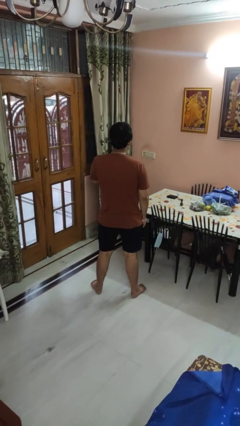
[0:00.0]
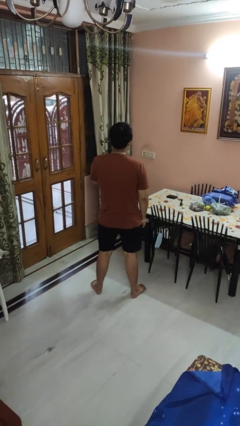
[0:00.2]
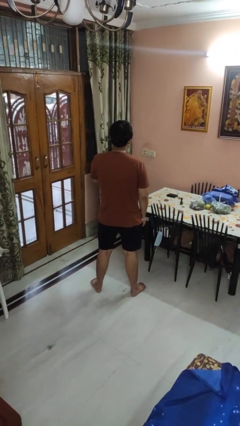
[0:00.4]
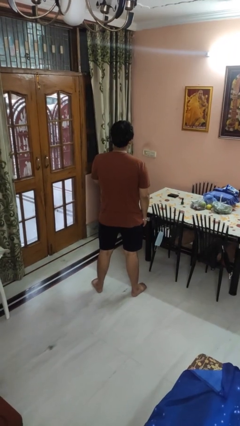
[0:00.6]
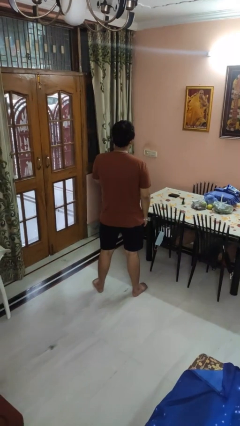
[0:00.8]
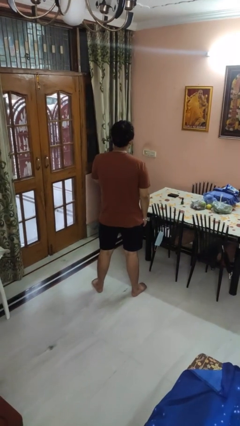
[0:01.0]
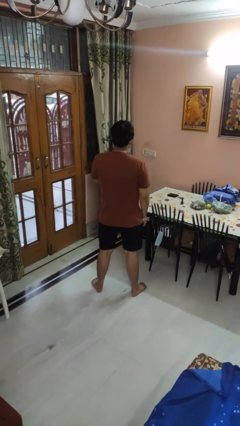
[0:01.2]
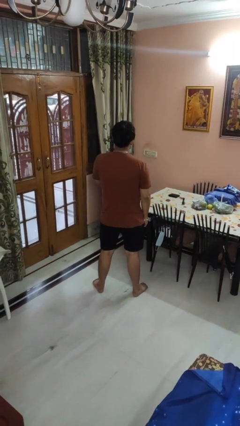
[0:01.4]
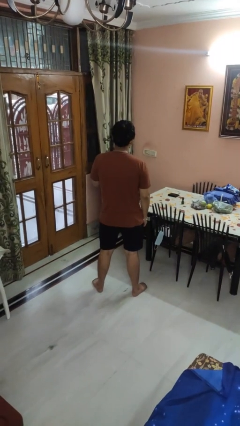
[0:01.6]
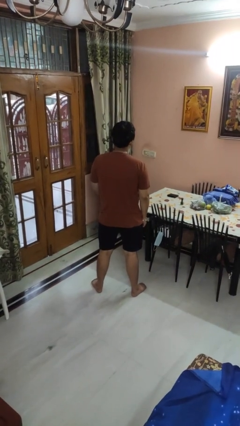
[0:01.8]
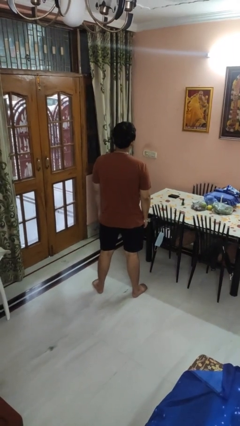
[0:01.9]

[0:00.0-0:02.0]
person strokes chin

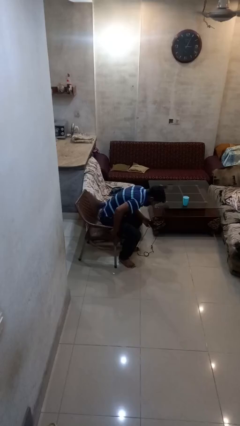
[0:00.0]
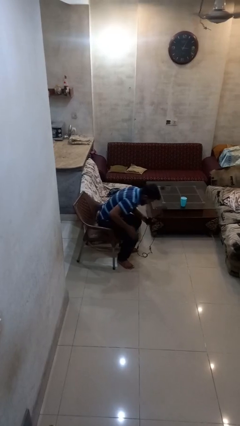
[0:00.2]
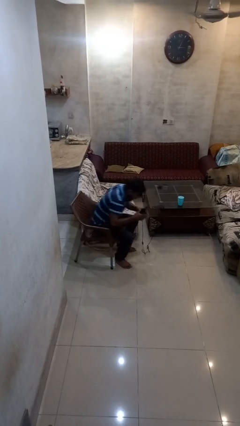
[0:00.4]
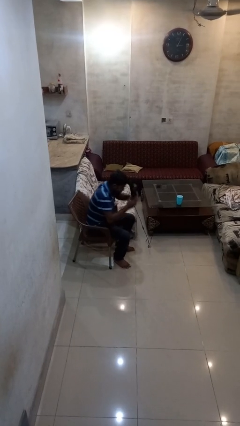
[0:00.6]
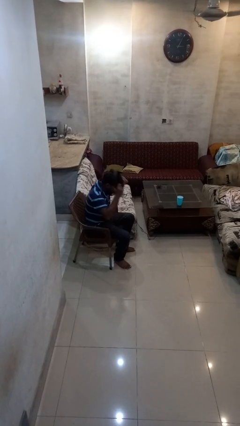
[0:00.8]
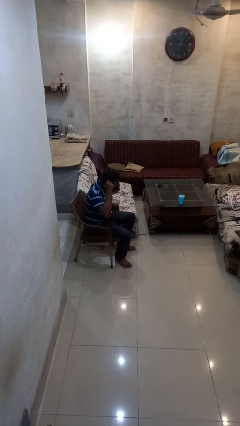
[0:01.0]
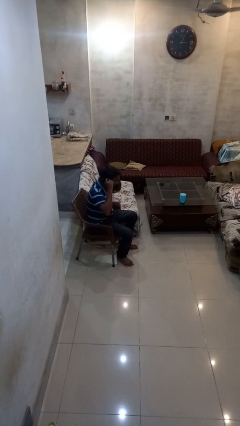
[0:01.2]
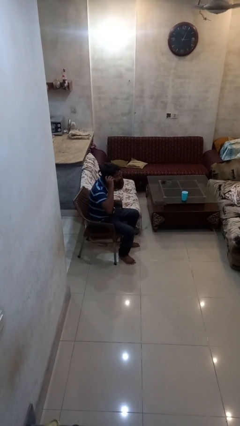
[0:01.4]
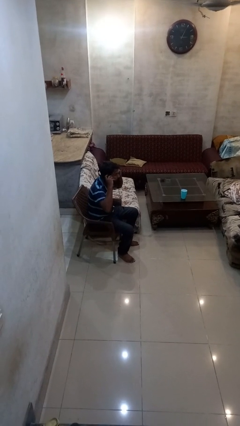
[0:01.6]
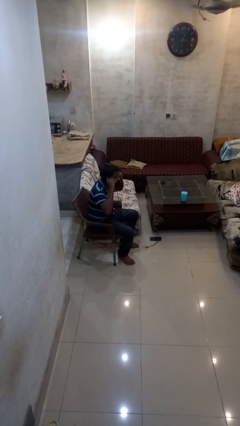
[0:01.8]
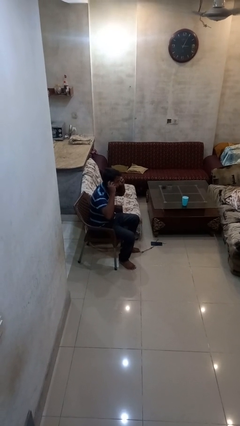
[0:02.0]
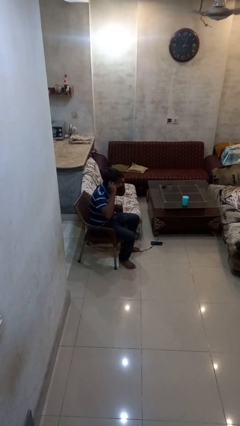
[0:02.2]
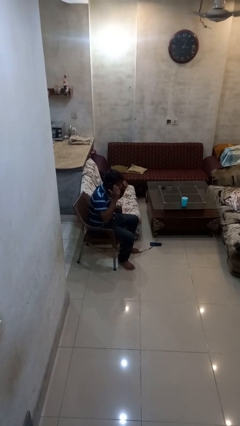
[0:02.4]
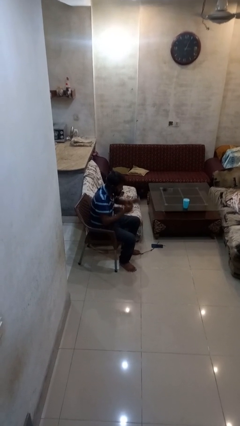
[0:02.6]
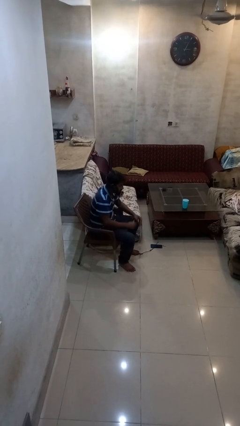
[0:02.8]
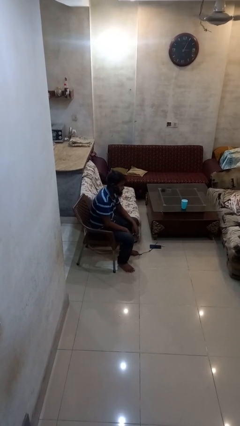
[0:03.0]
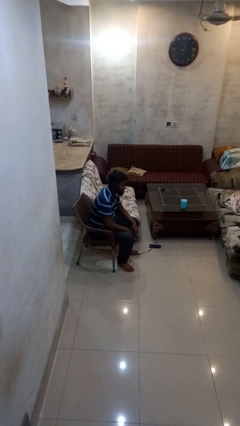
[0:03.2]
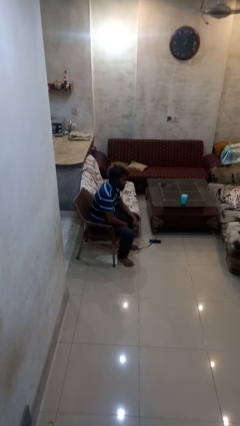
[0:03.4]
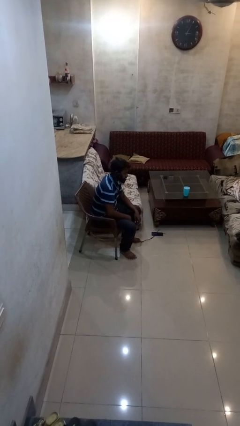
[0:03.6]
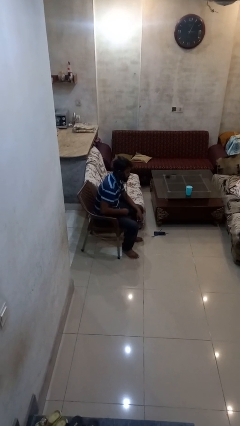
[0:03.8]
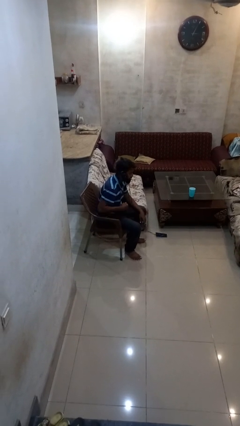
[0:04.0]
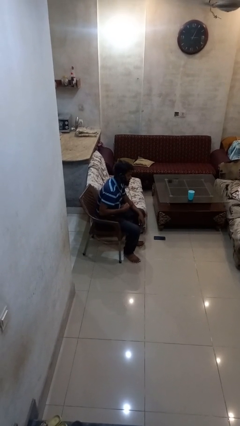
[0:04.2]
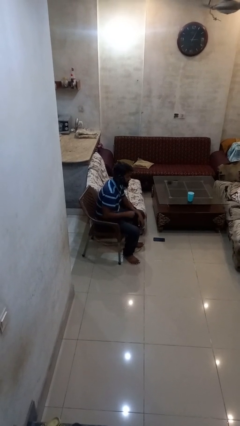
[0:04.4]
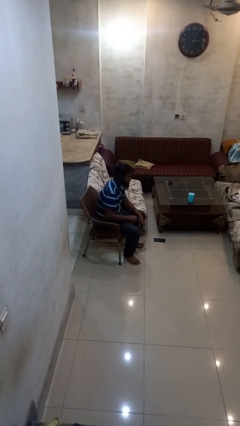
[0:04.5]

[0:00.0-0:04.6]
person puts on headphones

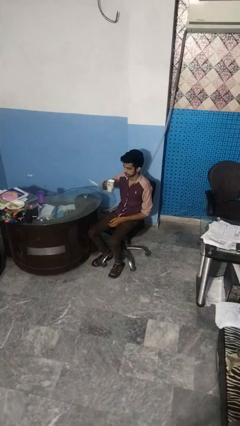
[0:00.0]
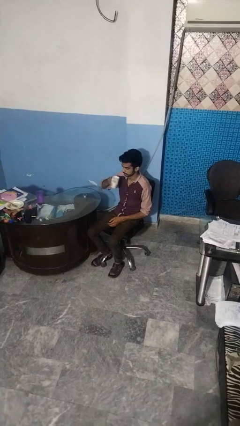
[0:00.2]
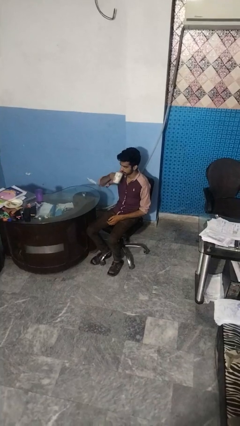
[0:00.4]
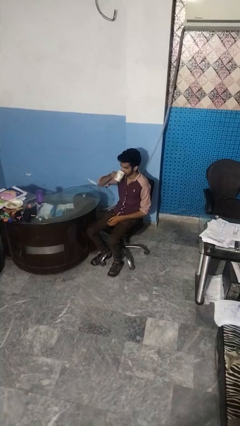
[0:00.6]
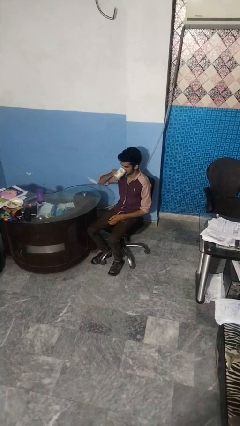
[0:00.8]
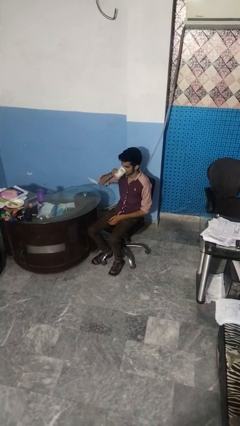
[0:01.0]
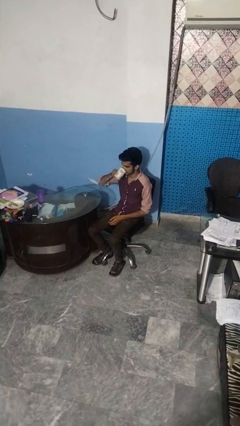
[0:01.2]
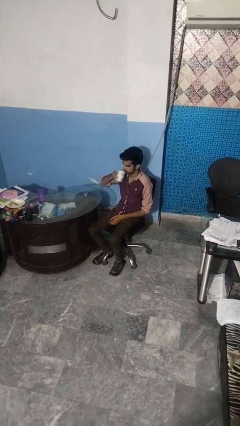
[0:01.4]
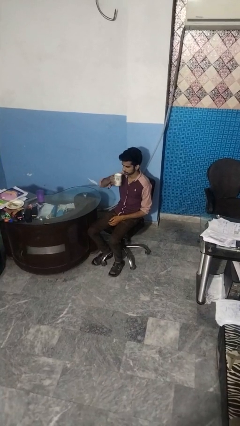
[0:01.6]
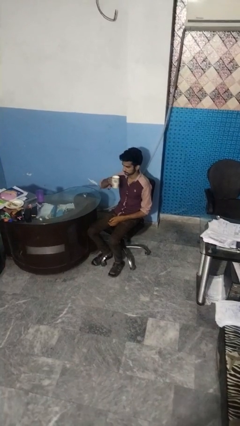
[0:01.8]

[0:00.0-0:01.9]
person drinks from mug

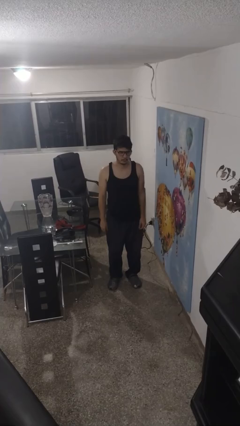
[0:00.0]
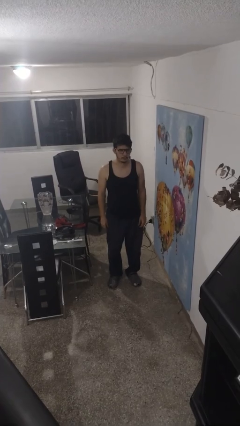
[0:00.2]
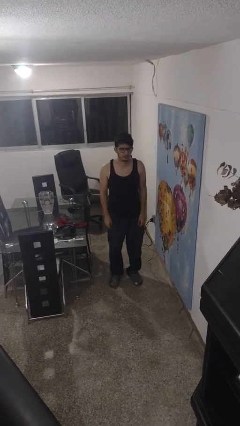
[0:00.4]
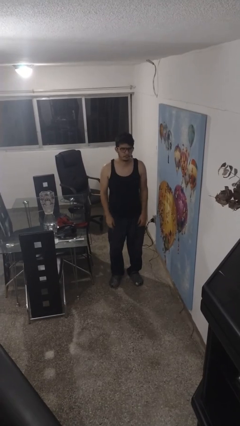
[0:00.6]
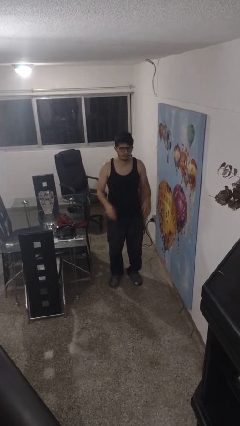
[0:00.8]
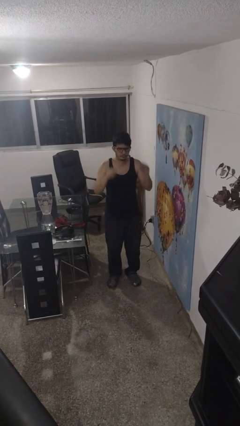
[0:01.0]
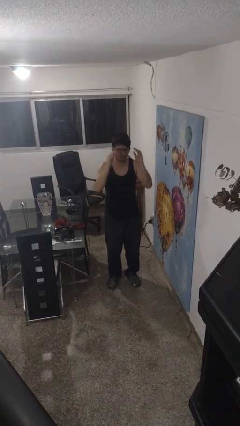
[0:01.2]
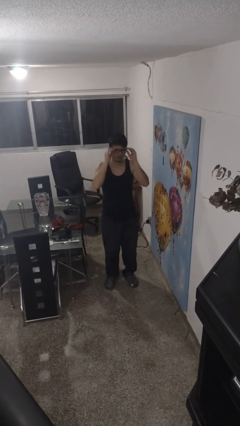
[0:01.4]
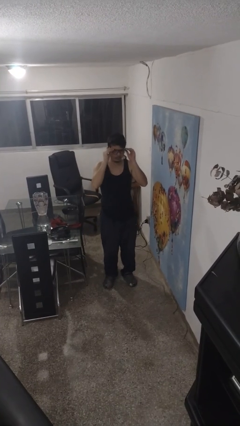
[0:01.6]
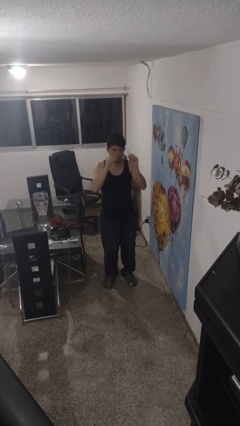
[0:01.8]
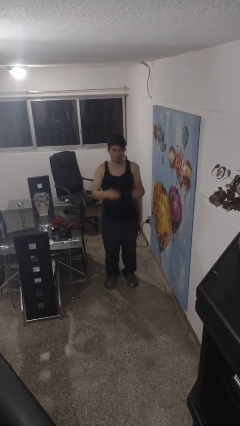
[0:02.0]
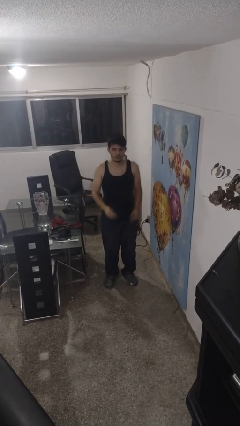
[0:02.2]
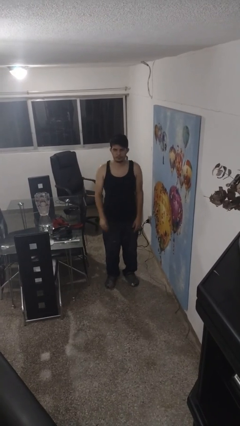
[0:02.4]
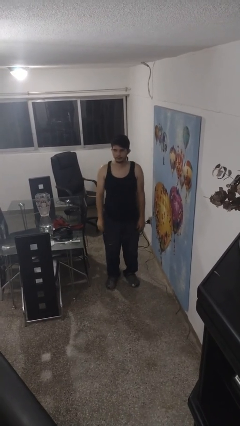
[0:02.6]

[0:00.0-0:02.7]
person takes off glasses

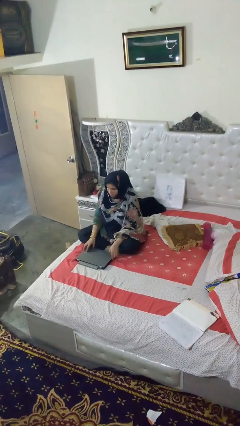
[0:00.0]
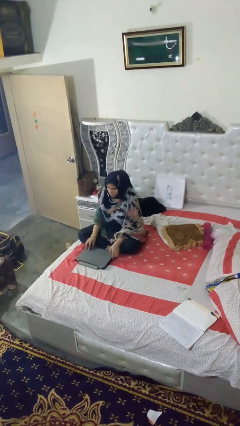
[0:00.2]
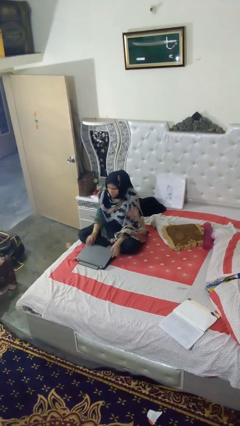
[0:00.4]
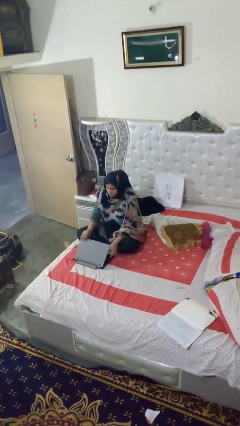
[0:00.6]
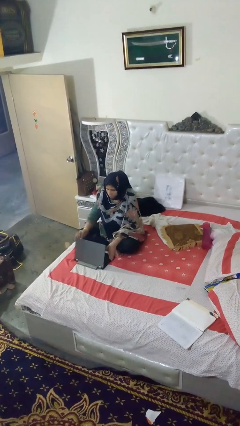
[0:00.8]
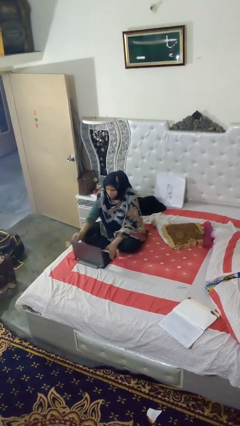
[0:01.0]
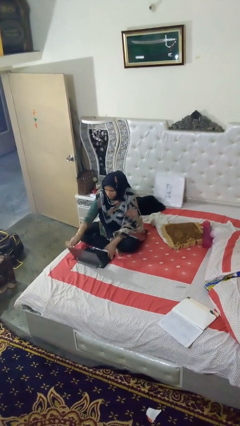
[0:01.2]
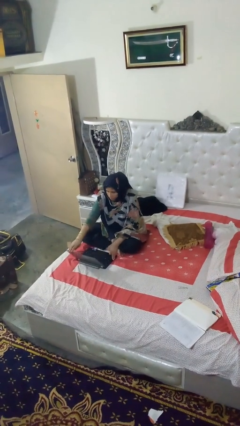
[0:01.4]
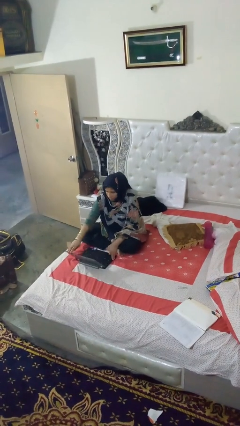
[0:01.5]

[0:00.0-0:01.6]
person opens laptop

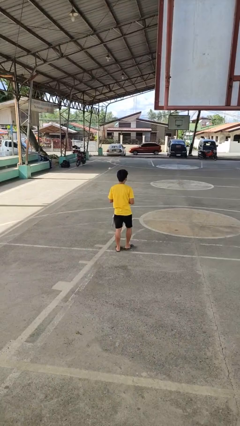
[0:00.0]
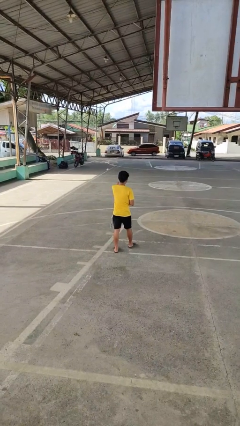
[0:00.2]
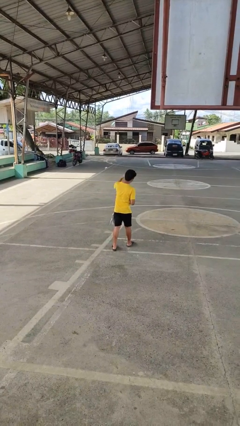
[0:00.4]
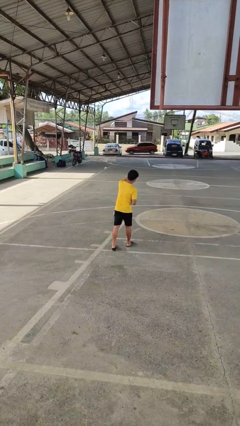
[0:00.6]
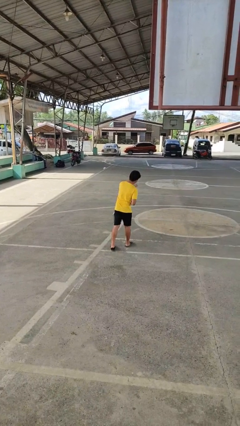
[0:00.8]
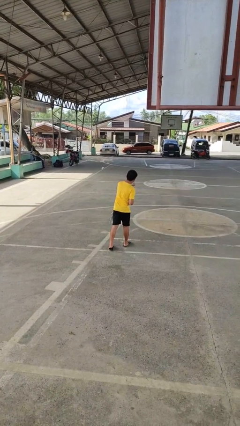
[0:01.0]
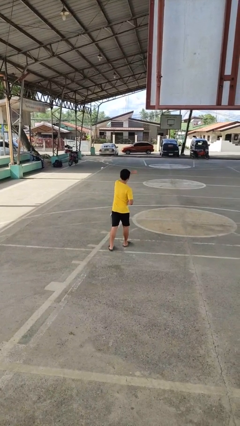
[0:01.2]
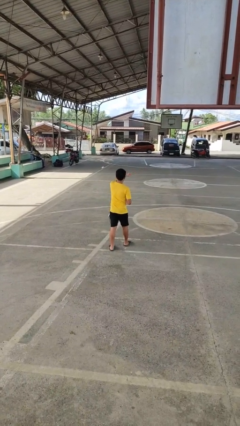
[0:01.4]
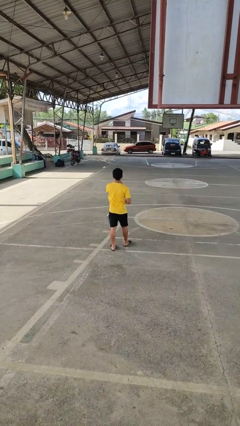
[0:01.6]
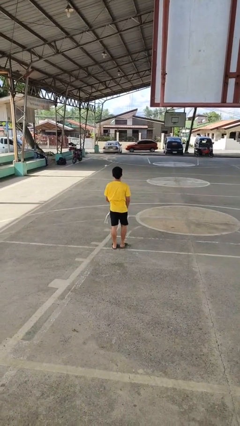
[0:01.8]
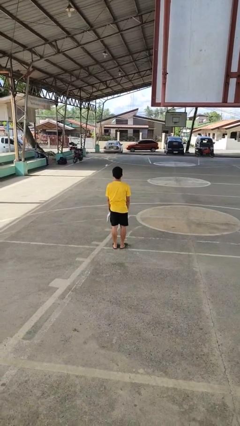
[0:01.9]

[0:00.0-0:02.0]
person punches

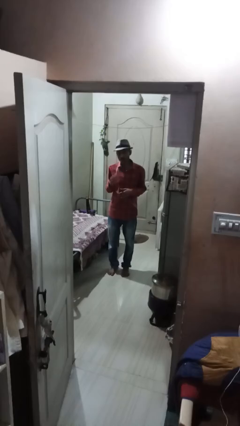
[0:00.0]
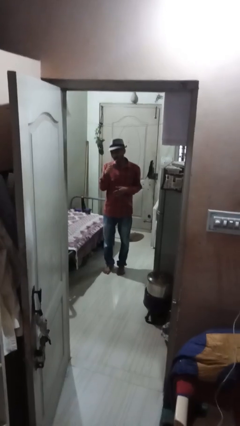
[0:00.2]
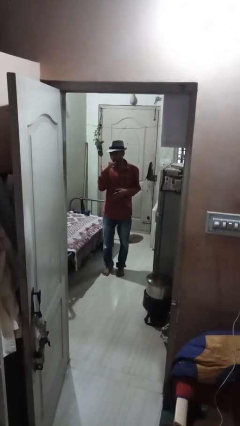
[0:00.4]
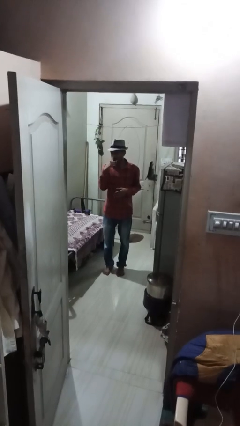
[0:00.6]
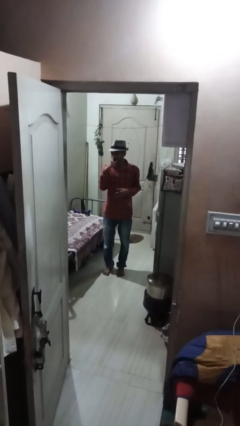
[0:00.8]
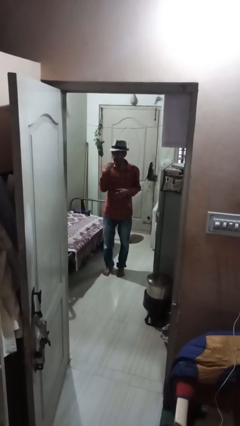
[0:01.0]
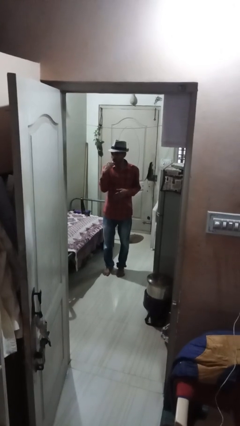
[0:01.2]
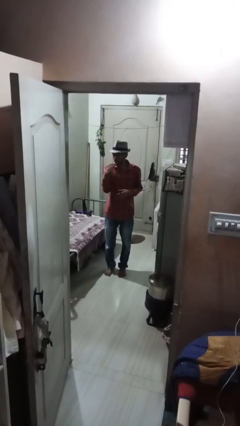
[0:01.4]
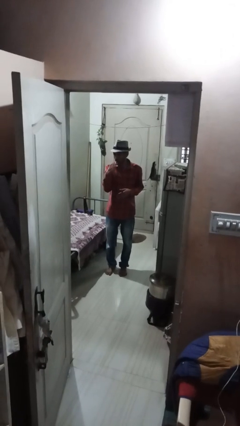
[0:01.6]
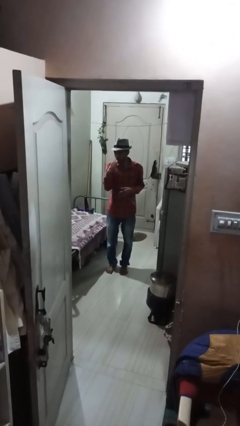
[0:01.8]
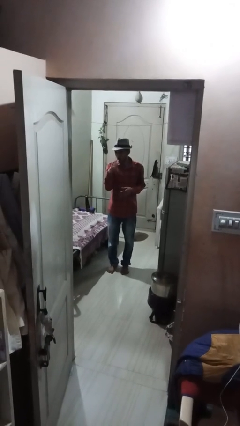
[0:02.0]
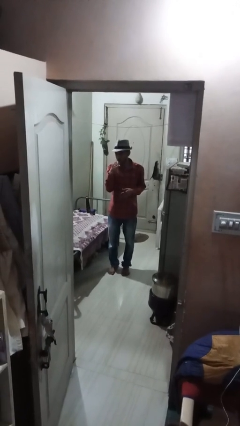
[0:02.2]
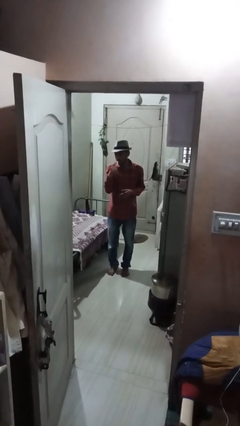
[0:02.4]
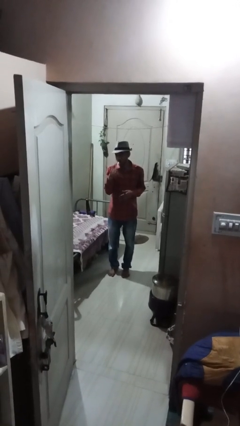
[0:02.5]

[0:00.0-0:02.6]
person brushes teeth
